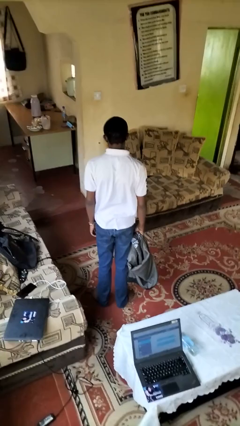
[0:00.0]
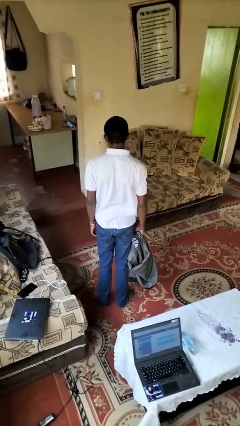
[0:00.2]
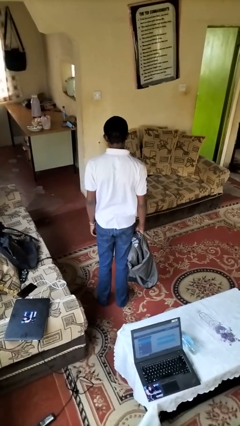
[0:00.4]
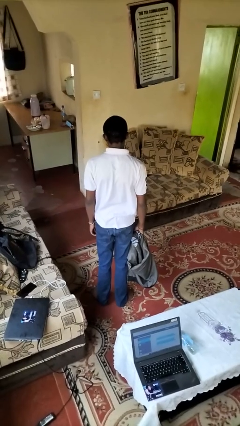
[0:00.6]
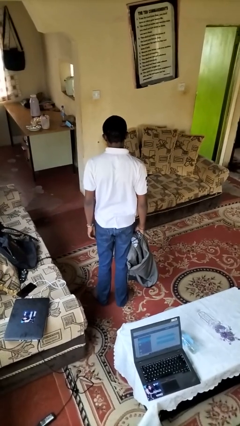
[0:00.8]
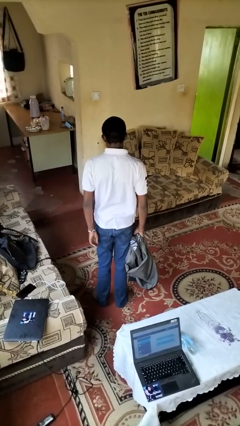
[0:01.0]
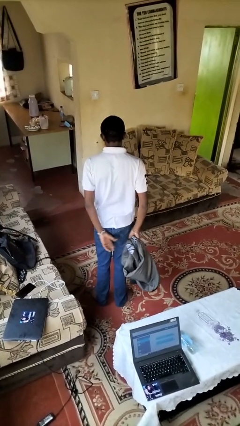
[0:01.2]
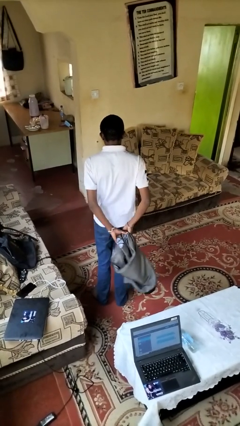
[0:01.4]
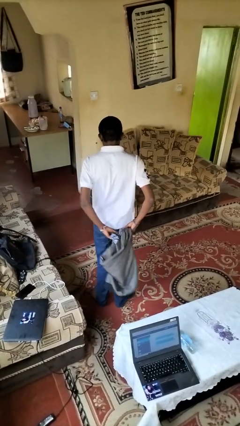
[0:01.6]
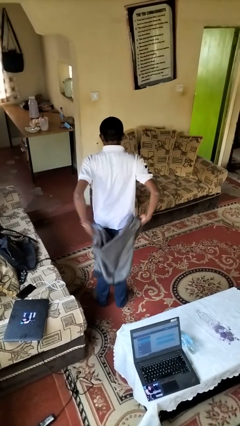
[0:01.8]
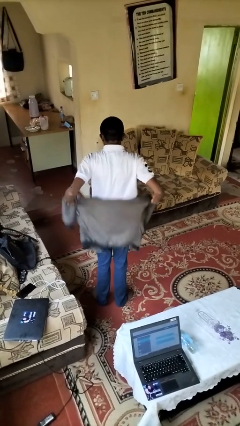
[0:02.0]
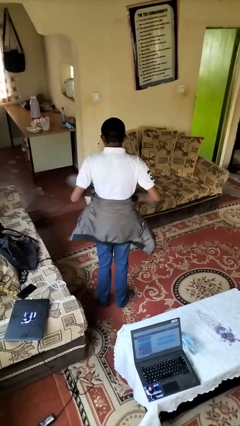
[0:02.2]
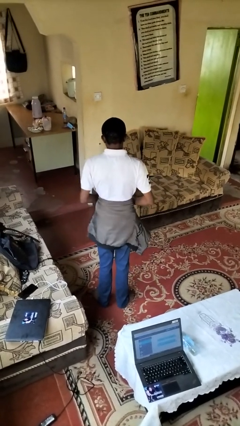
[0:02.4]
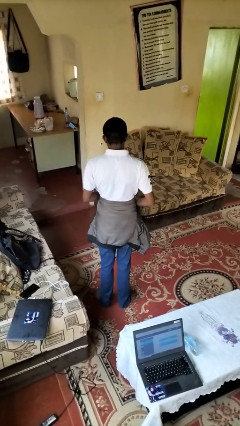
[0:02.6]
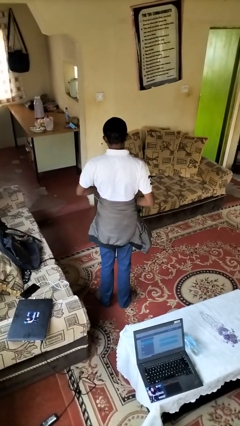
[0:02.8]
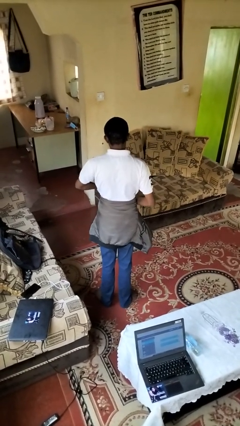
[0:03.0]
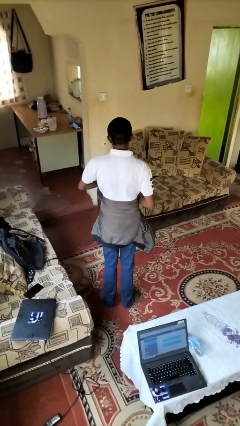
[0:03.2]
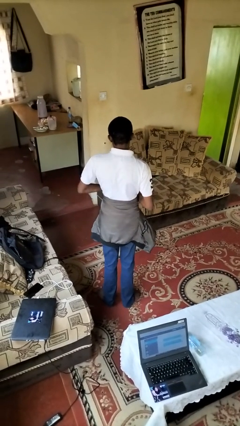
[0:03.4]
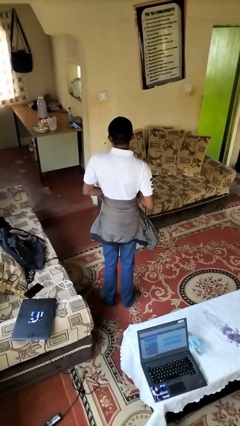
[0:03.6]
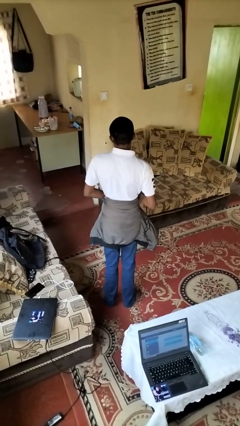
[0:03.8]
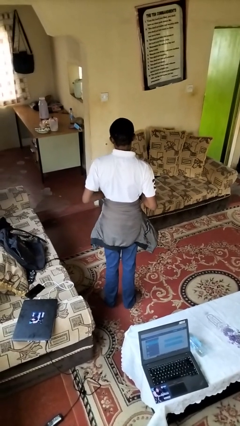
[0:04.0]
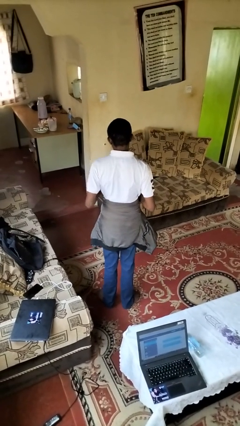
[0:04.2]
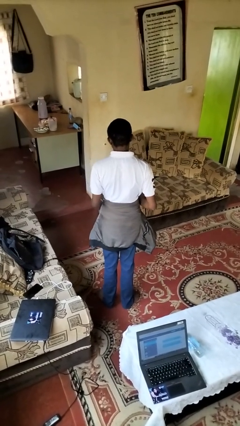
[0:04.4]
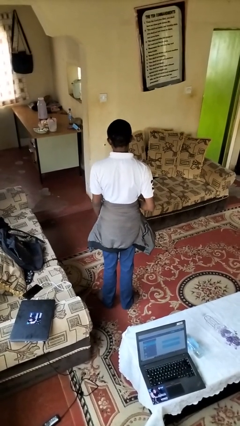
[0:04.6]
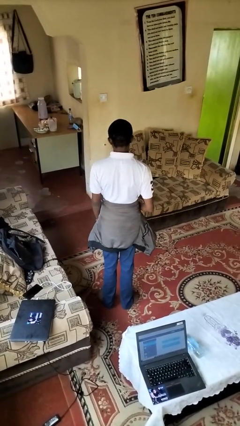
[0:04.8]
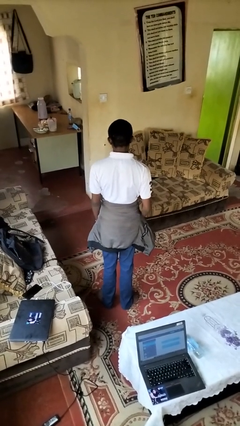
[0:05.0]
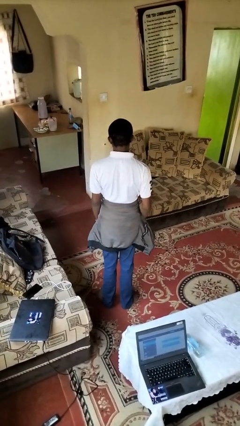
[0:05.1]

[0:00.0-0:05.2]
person ties jacket around waist

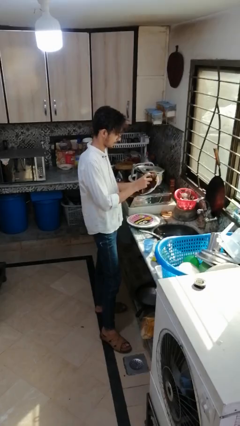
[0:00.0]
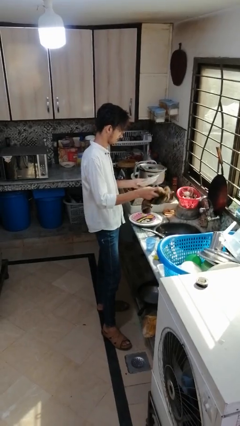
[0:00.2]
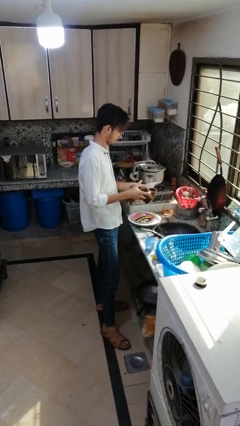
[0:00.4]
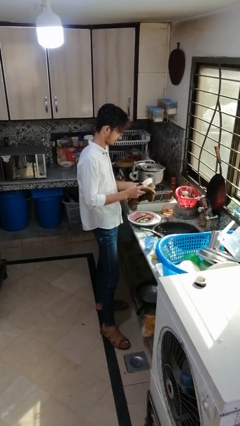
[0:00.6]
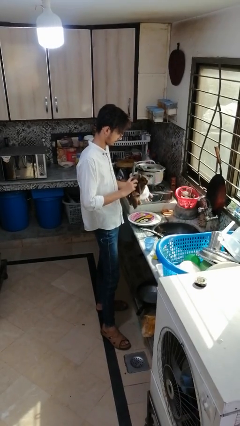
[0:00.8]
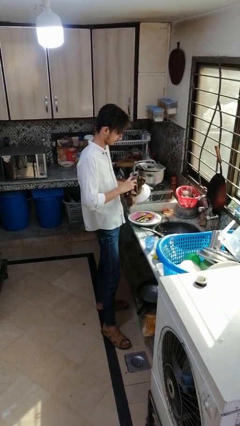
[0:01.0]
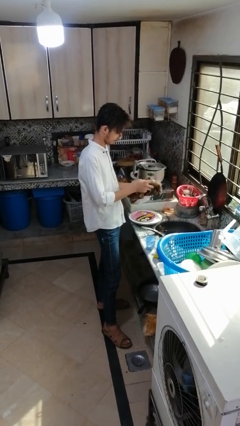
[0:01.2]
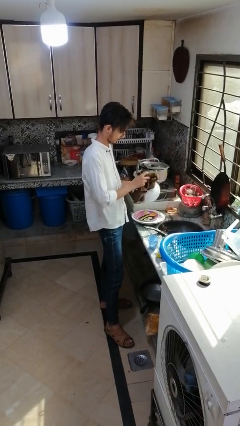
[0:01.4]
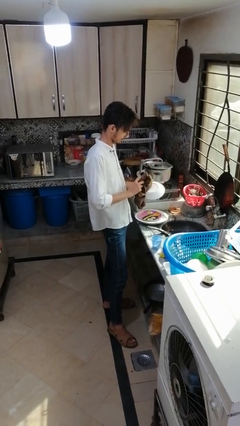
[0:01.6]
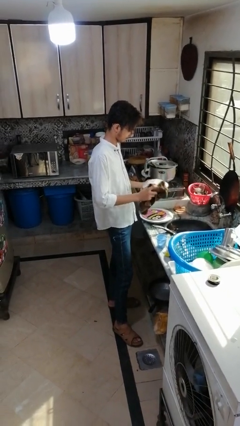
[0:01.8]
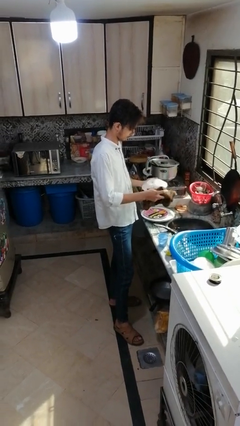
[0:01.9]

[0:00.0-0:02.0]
person dries dish

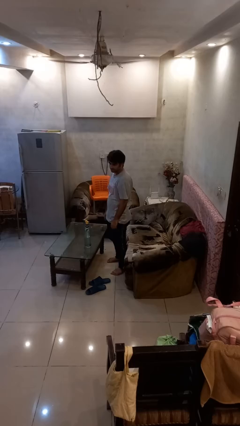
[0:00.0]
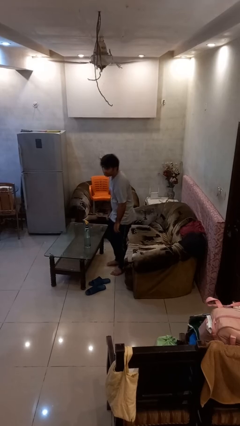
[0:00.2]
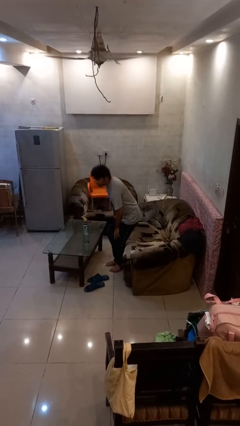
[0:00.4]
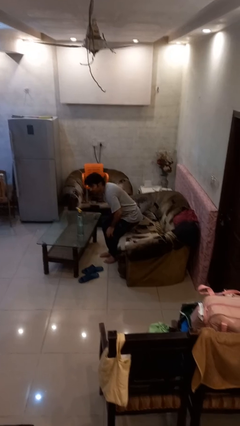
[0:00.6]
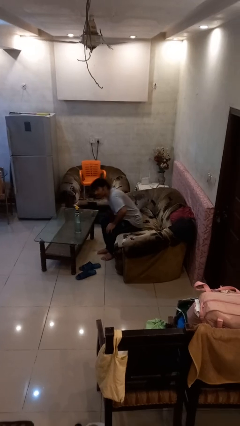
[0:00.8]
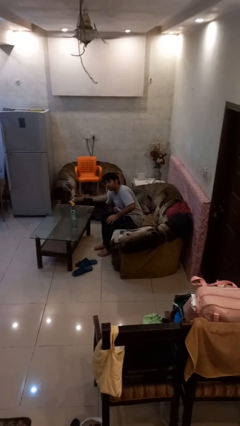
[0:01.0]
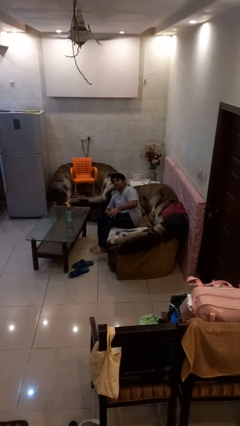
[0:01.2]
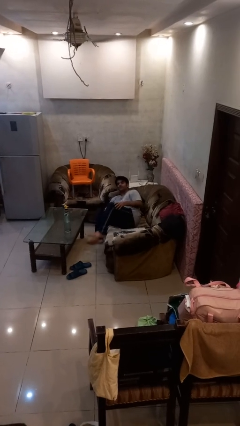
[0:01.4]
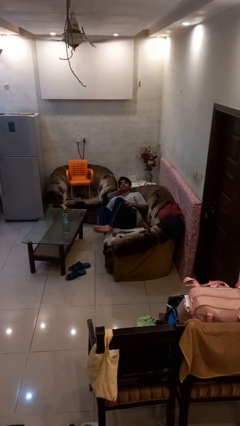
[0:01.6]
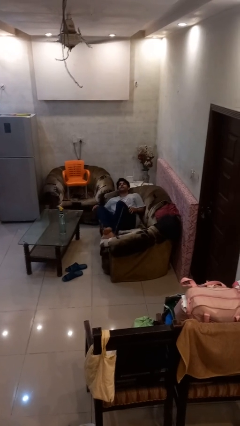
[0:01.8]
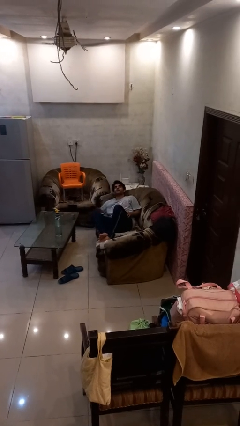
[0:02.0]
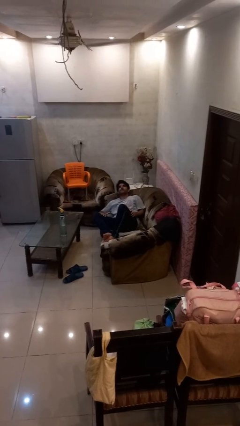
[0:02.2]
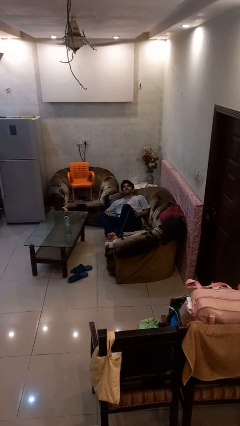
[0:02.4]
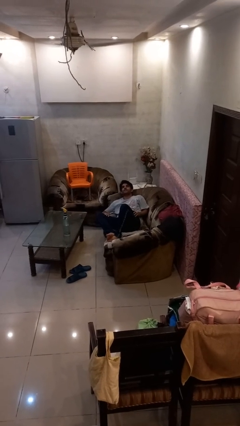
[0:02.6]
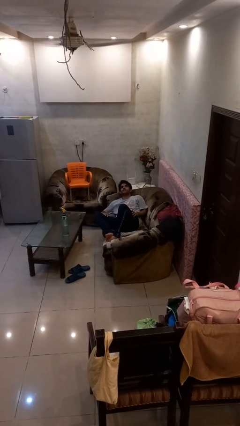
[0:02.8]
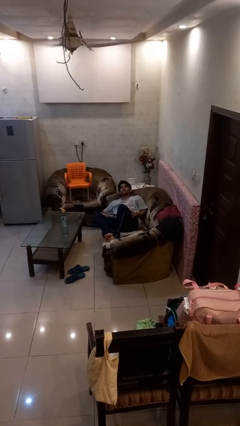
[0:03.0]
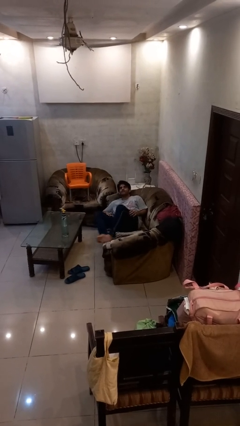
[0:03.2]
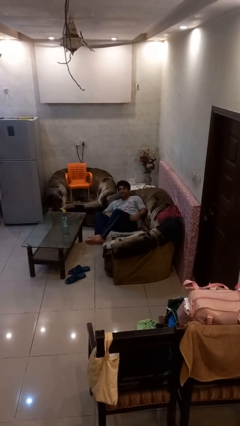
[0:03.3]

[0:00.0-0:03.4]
person lies down on couch

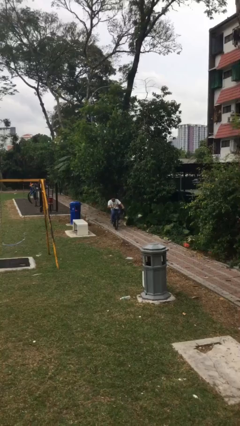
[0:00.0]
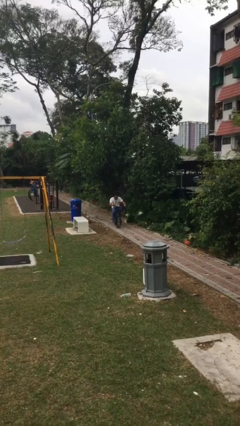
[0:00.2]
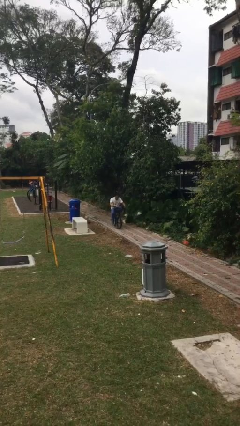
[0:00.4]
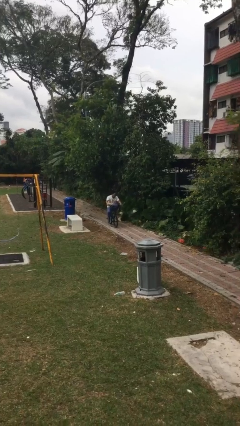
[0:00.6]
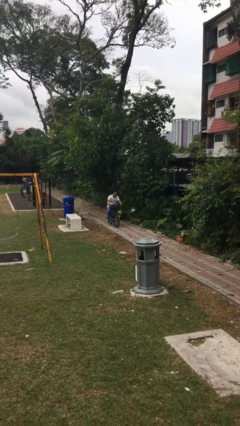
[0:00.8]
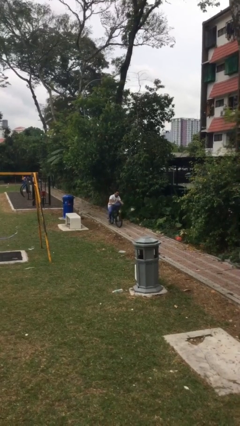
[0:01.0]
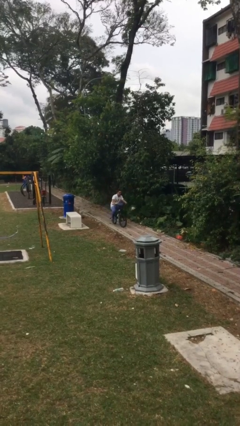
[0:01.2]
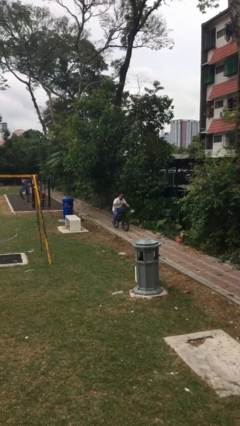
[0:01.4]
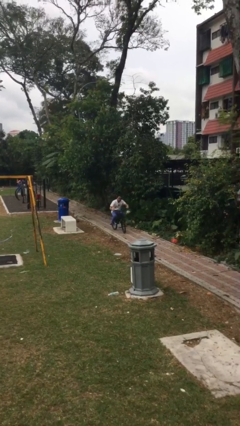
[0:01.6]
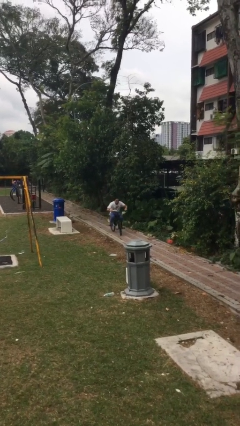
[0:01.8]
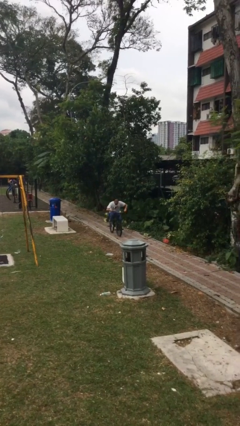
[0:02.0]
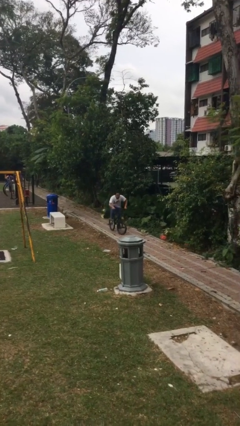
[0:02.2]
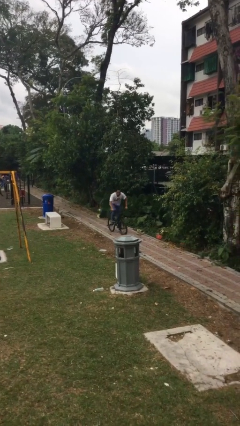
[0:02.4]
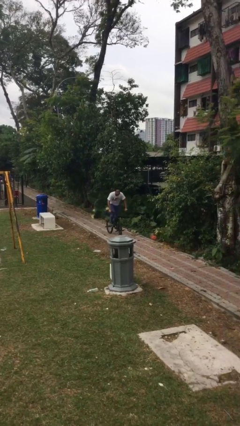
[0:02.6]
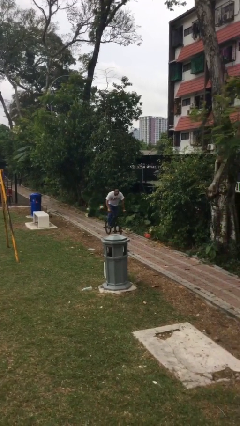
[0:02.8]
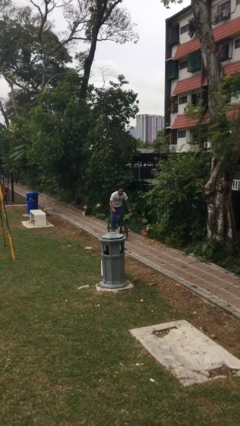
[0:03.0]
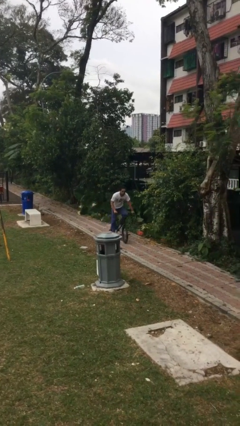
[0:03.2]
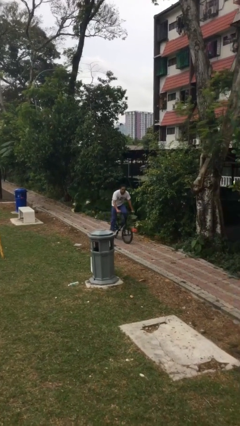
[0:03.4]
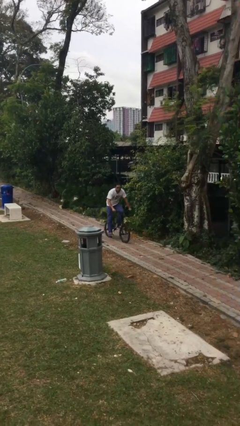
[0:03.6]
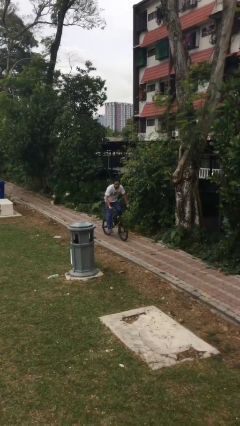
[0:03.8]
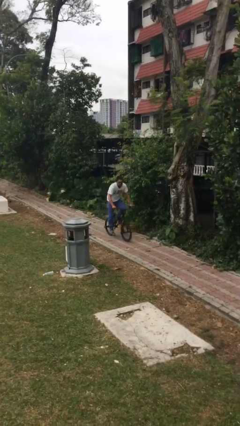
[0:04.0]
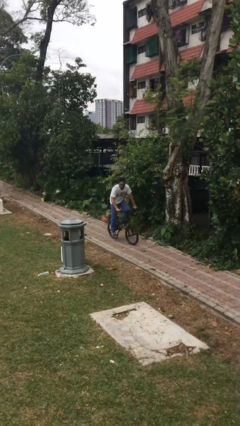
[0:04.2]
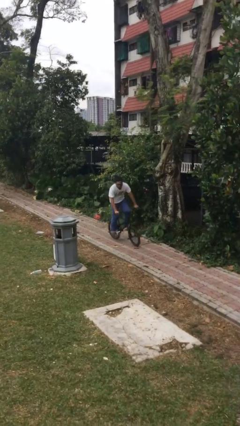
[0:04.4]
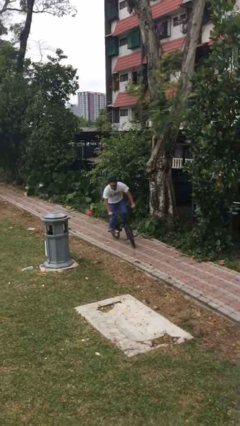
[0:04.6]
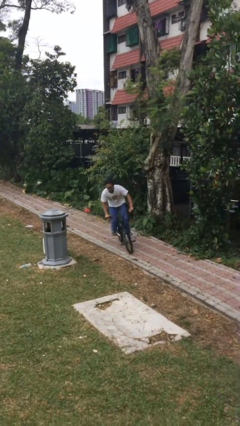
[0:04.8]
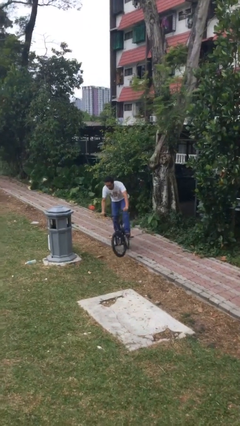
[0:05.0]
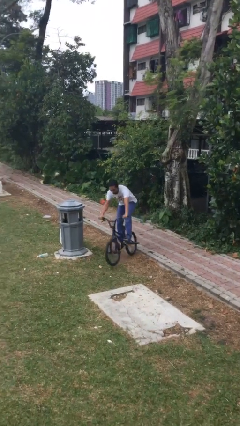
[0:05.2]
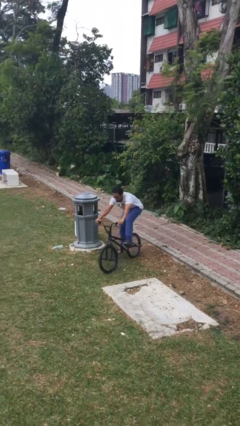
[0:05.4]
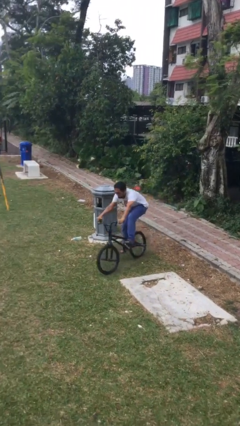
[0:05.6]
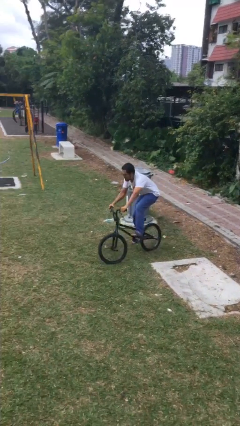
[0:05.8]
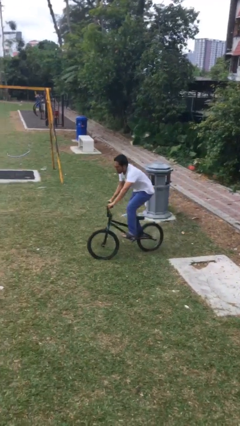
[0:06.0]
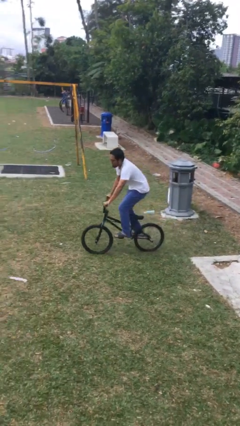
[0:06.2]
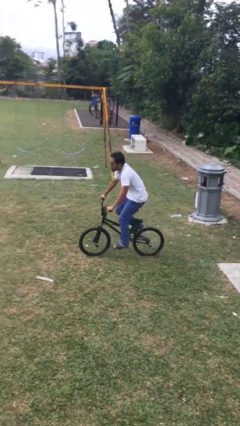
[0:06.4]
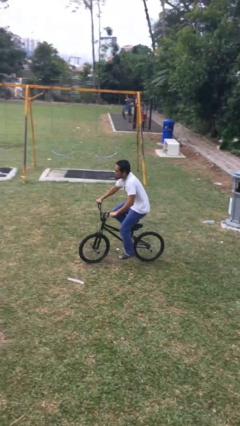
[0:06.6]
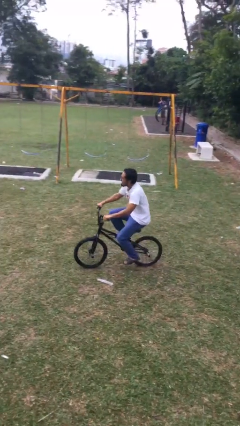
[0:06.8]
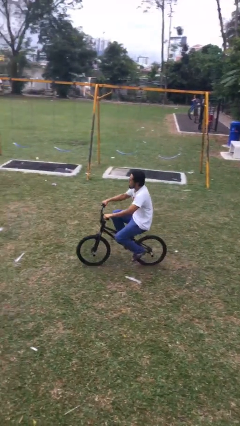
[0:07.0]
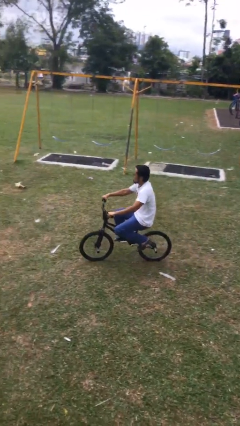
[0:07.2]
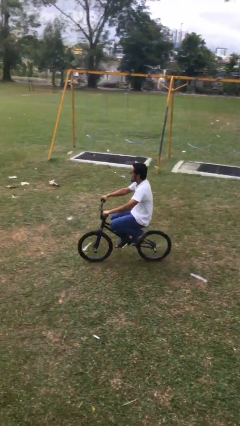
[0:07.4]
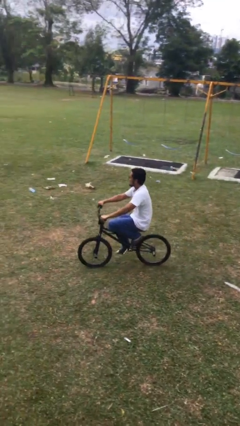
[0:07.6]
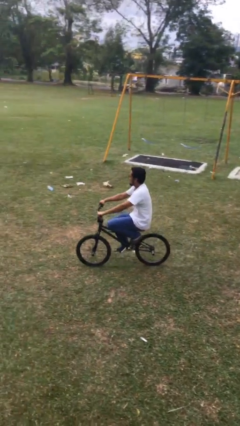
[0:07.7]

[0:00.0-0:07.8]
person rides bicycle
